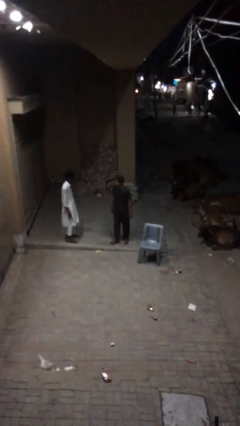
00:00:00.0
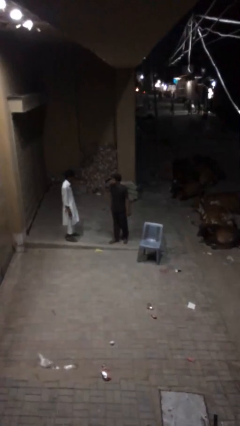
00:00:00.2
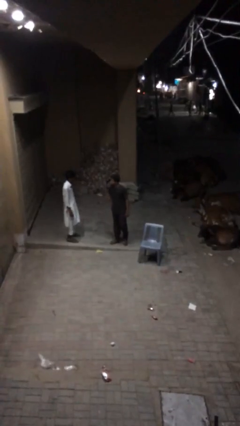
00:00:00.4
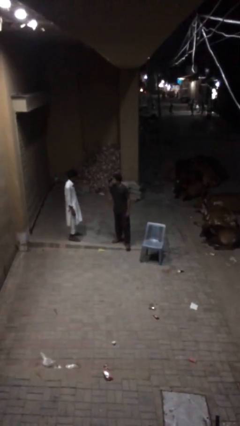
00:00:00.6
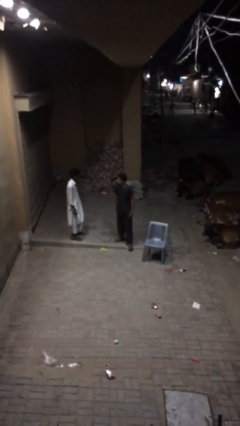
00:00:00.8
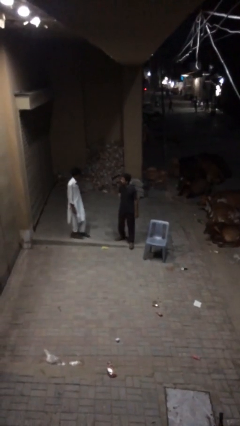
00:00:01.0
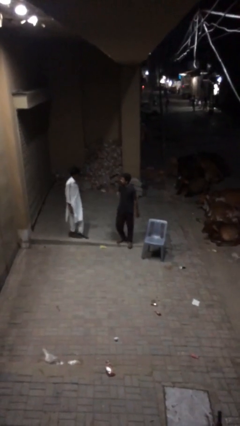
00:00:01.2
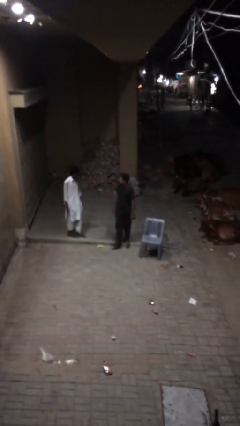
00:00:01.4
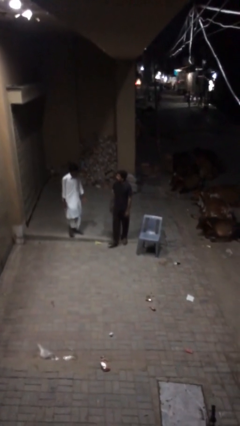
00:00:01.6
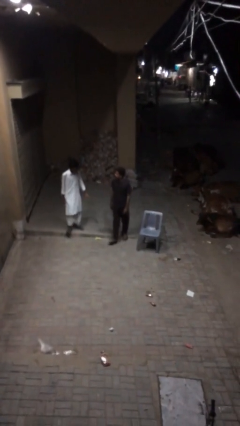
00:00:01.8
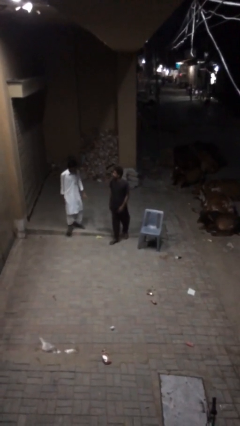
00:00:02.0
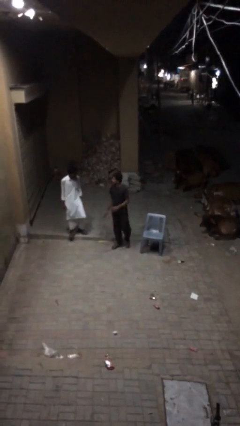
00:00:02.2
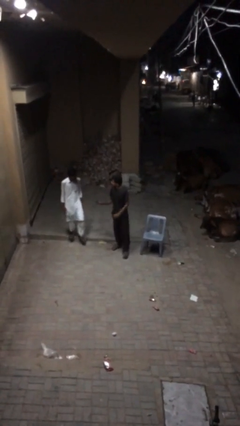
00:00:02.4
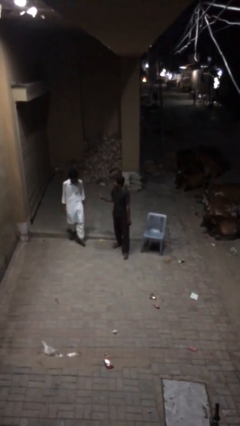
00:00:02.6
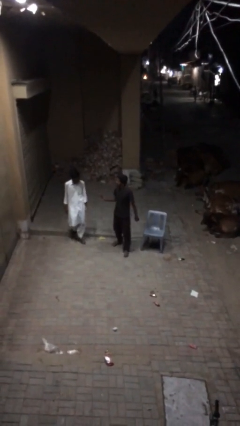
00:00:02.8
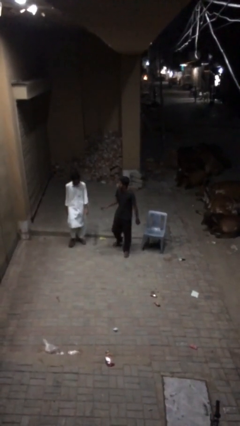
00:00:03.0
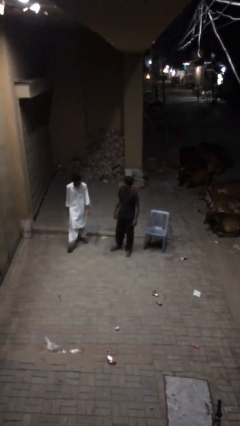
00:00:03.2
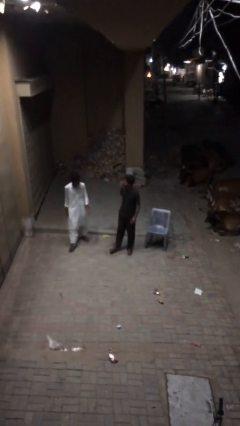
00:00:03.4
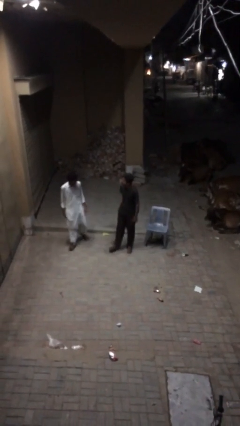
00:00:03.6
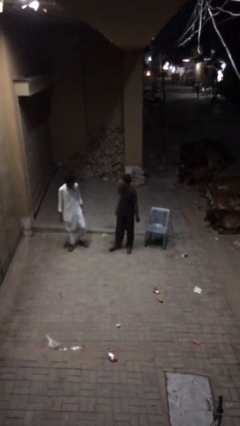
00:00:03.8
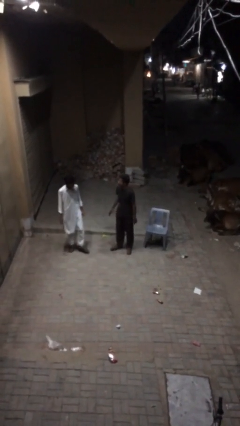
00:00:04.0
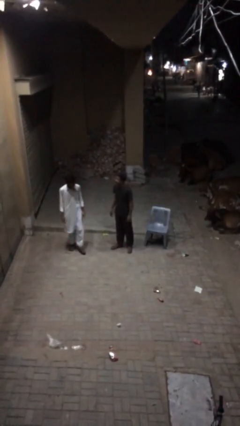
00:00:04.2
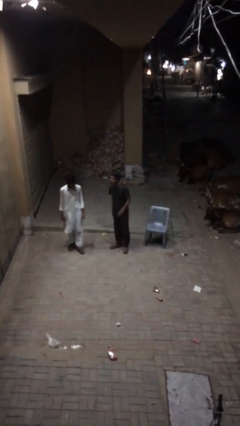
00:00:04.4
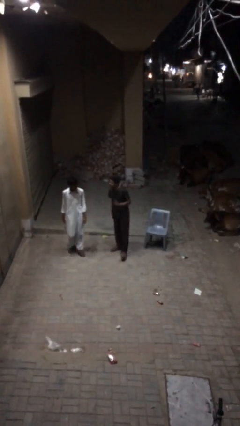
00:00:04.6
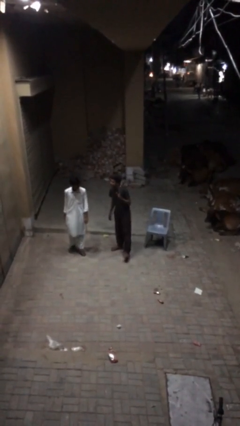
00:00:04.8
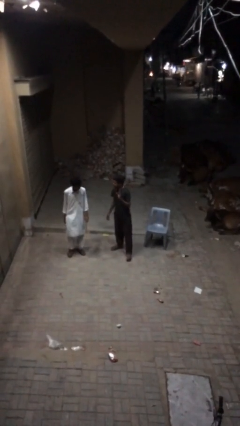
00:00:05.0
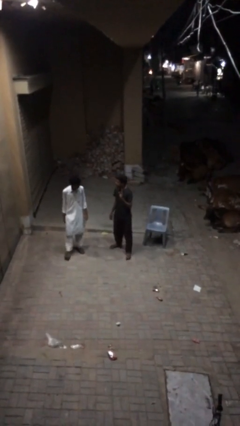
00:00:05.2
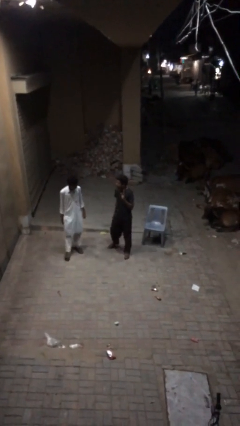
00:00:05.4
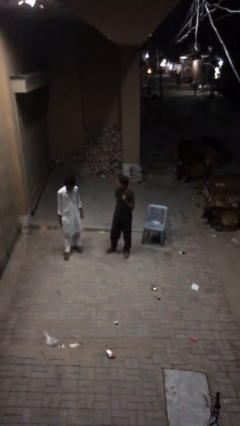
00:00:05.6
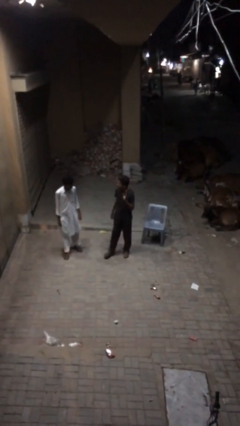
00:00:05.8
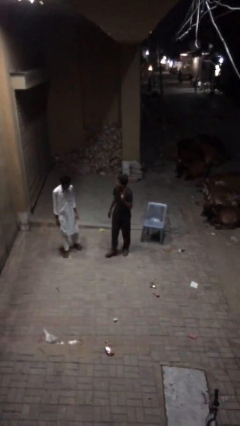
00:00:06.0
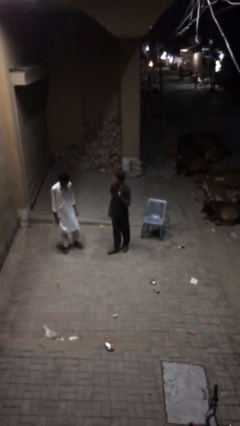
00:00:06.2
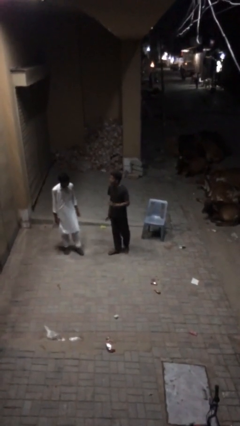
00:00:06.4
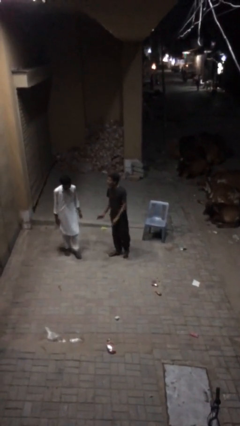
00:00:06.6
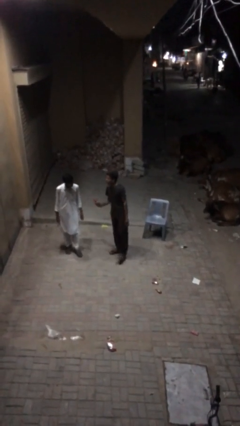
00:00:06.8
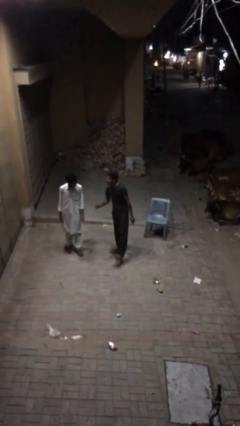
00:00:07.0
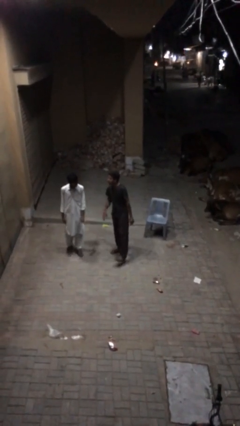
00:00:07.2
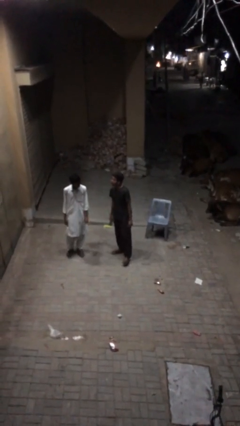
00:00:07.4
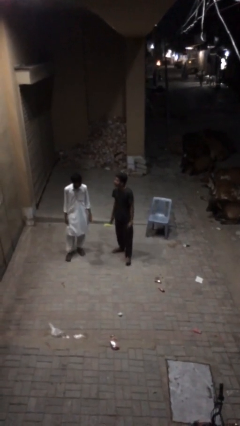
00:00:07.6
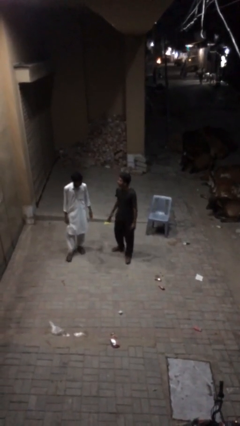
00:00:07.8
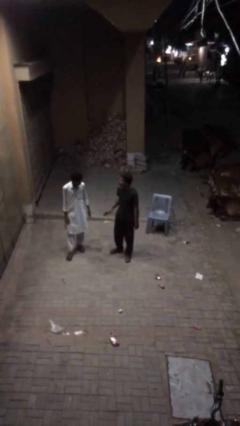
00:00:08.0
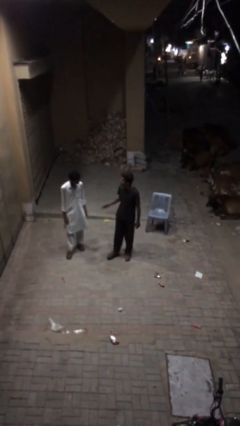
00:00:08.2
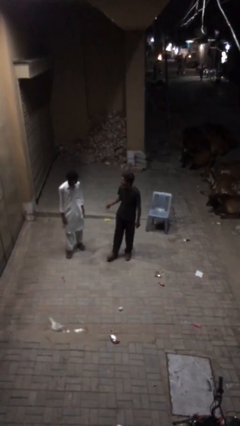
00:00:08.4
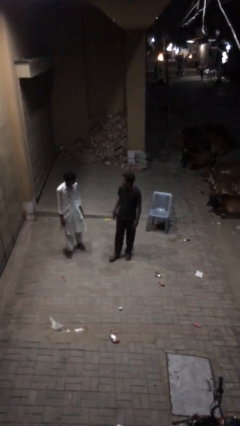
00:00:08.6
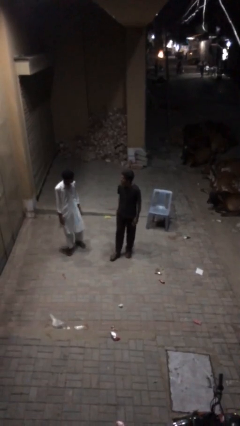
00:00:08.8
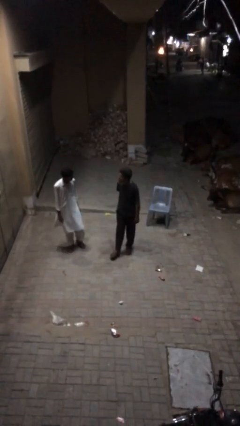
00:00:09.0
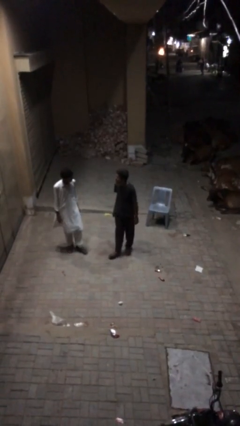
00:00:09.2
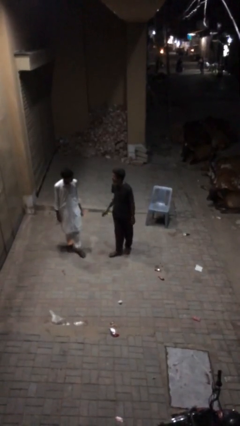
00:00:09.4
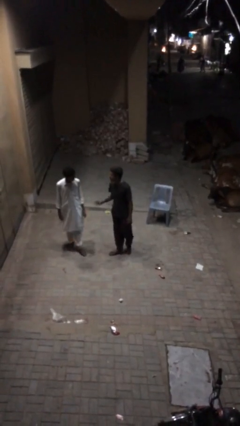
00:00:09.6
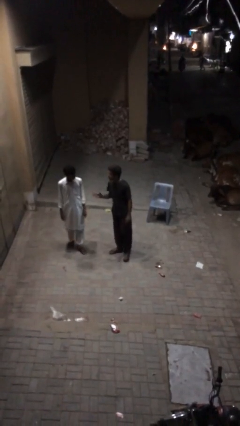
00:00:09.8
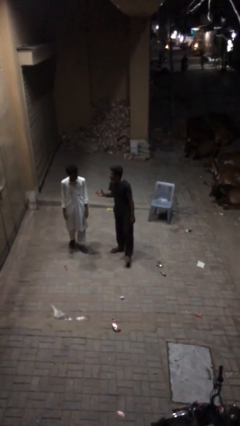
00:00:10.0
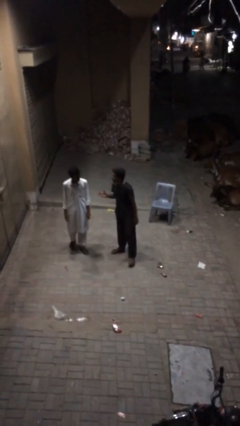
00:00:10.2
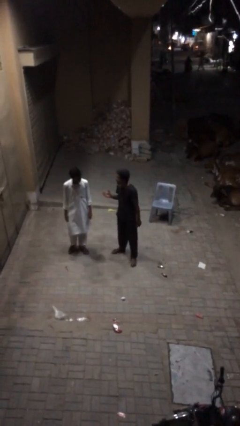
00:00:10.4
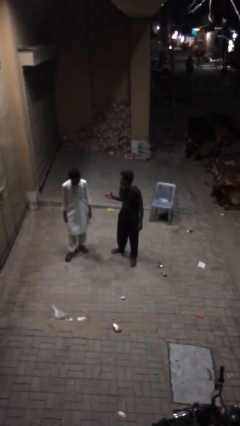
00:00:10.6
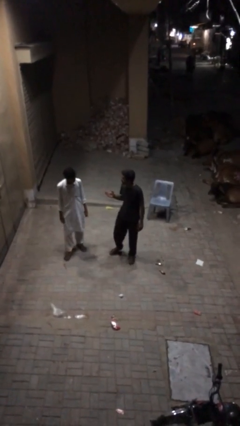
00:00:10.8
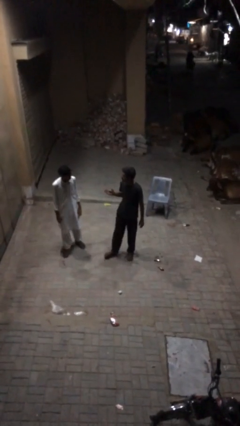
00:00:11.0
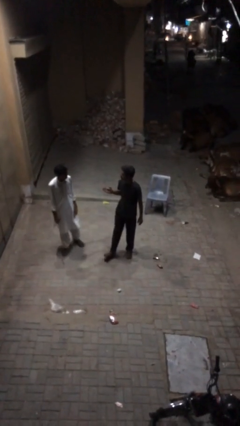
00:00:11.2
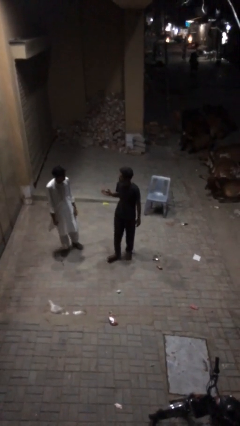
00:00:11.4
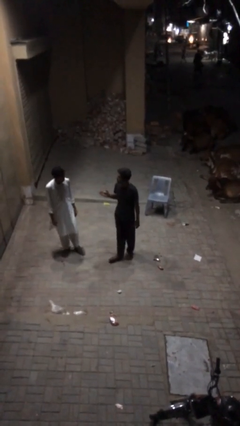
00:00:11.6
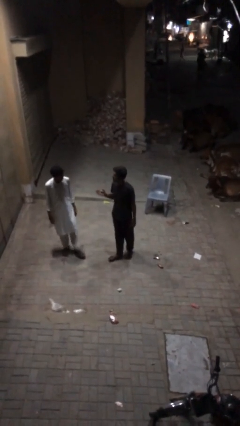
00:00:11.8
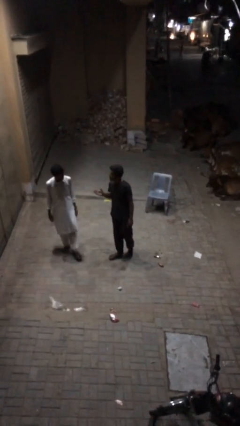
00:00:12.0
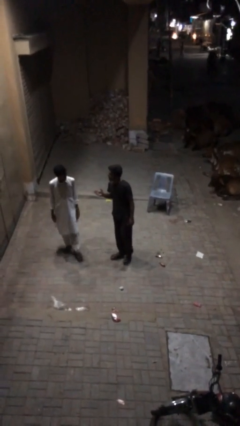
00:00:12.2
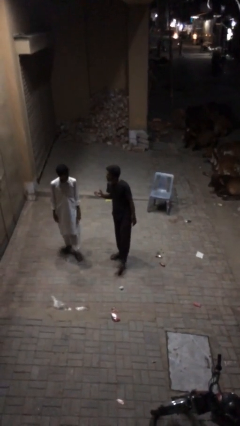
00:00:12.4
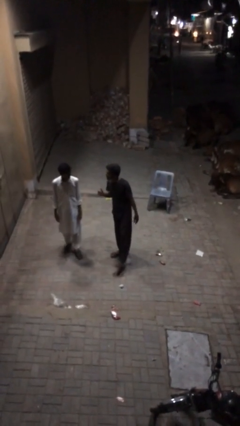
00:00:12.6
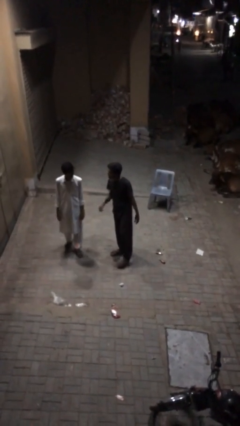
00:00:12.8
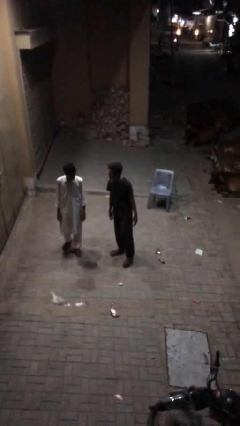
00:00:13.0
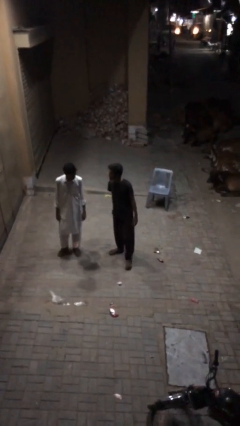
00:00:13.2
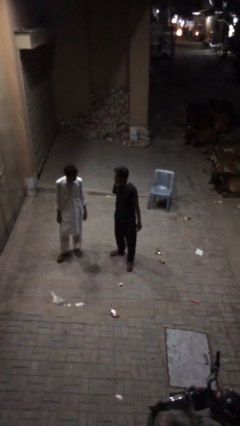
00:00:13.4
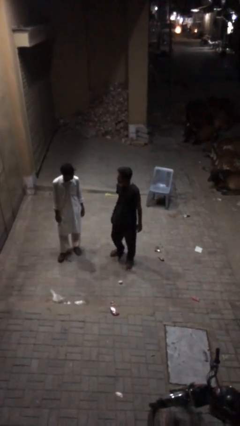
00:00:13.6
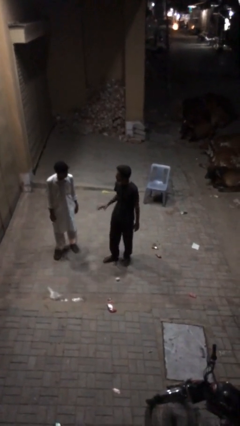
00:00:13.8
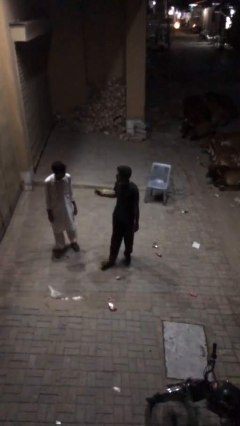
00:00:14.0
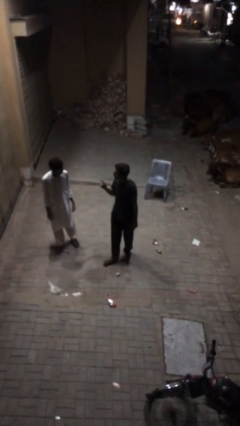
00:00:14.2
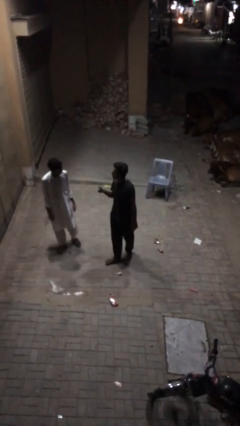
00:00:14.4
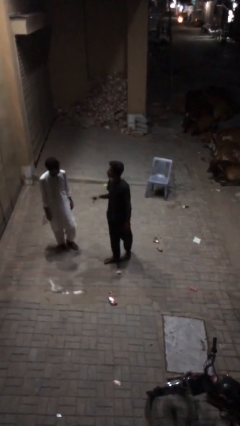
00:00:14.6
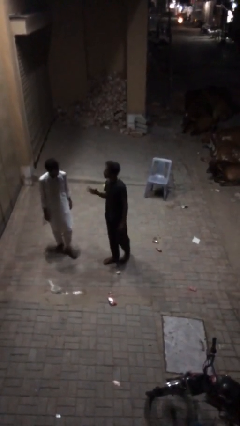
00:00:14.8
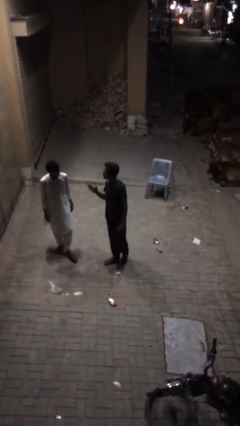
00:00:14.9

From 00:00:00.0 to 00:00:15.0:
person talks to person

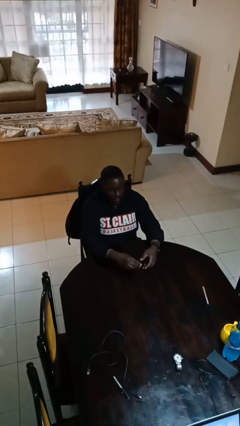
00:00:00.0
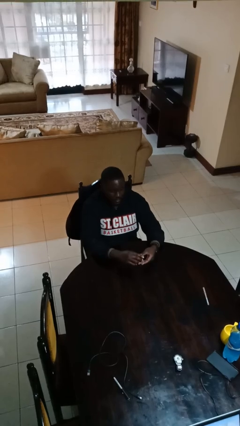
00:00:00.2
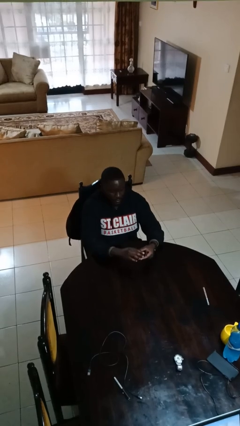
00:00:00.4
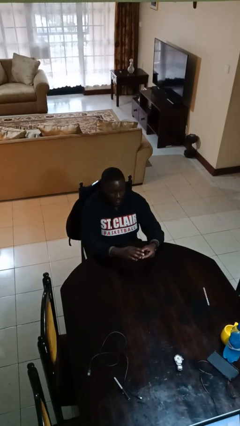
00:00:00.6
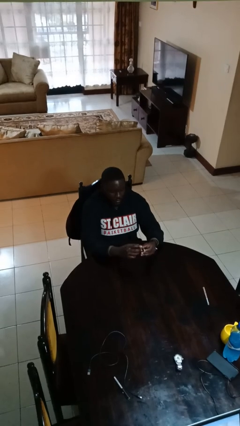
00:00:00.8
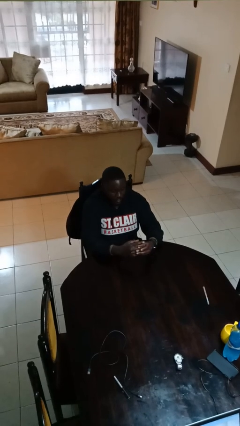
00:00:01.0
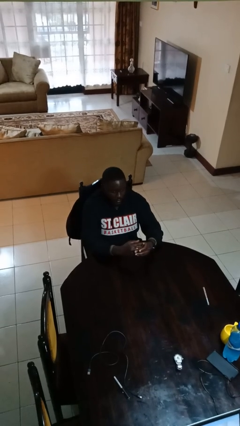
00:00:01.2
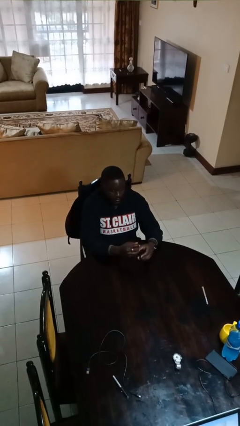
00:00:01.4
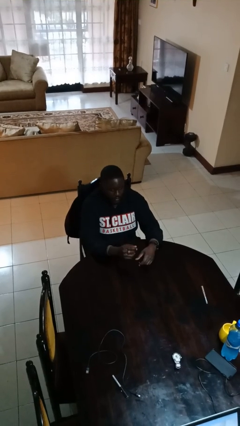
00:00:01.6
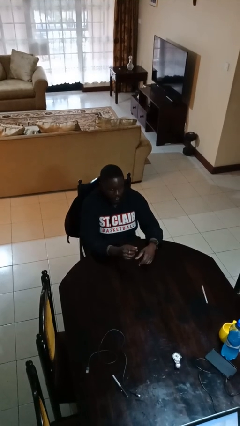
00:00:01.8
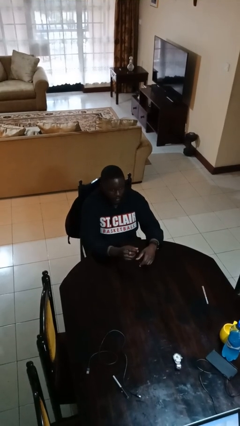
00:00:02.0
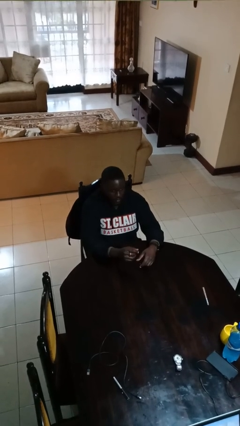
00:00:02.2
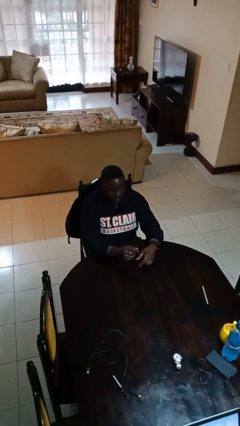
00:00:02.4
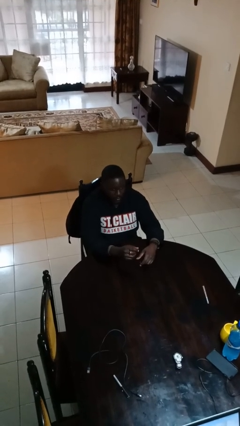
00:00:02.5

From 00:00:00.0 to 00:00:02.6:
person puts on ring

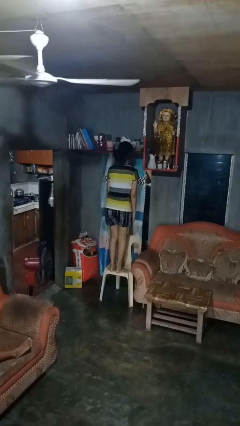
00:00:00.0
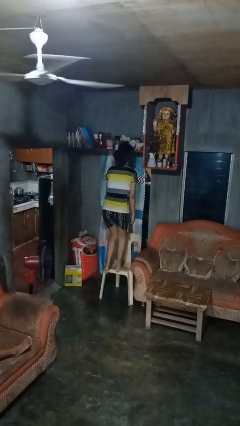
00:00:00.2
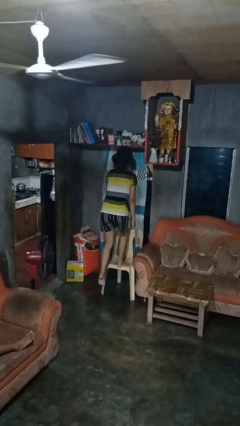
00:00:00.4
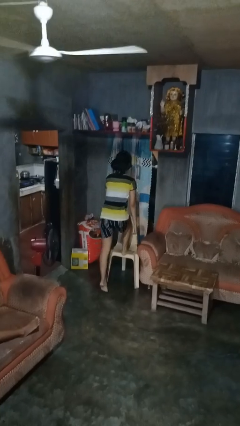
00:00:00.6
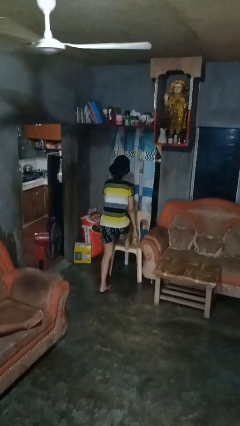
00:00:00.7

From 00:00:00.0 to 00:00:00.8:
person climbs off chair
